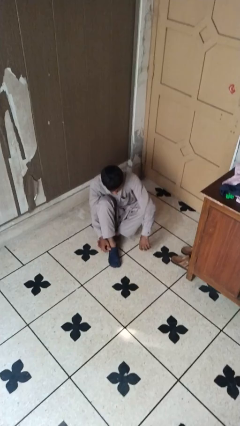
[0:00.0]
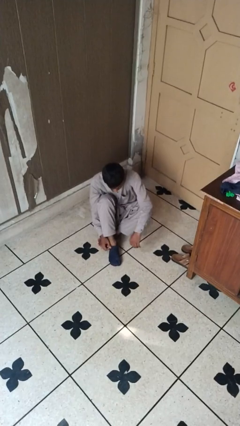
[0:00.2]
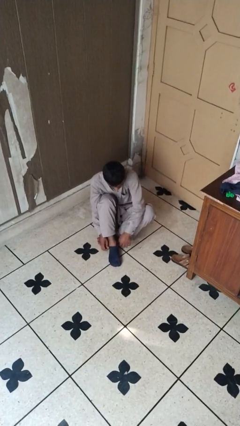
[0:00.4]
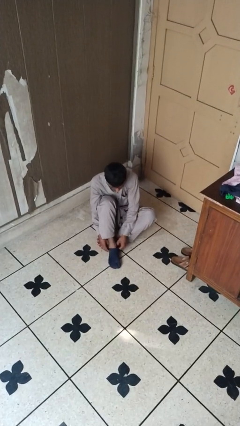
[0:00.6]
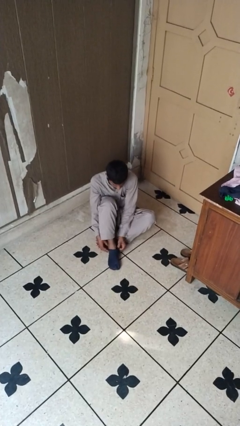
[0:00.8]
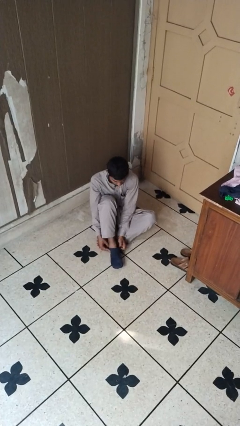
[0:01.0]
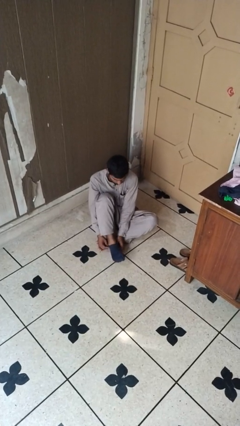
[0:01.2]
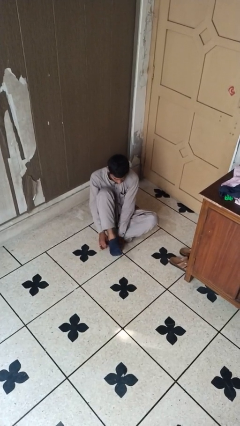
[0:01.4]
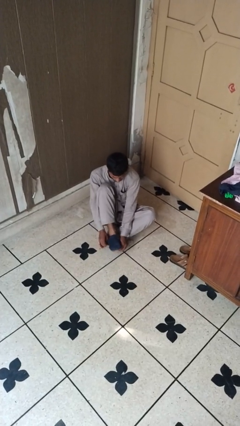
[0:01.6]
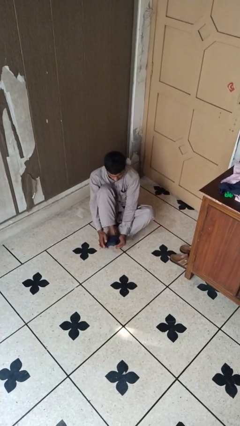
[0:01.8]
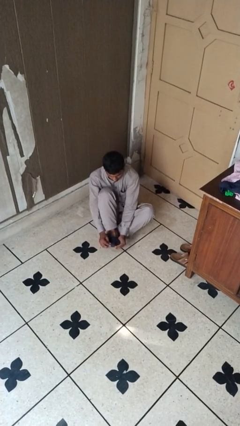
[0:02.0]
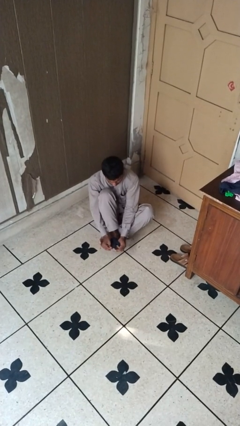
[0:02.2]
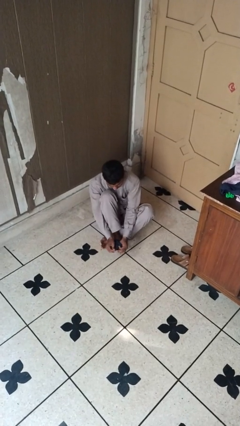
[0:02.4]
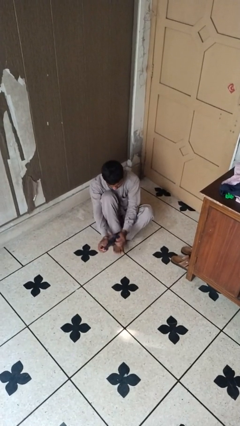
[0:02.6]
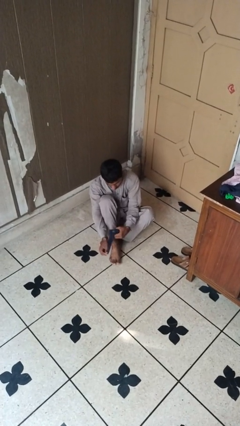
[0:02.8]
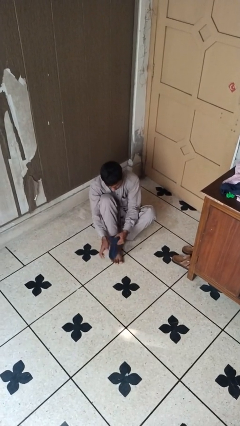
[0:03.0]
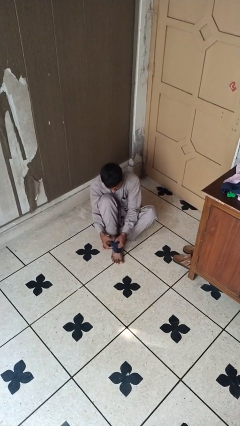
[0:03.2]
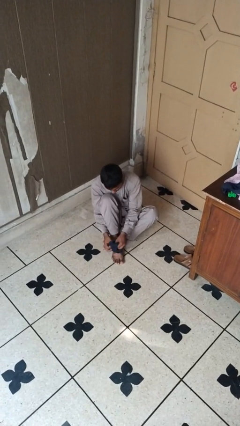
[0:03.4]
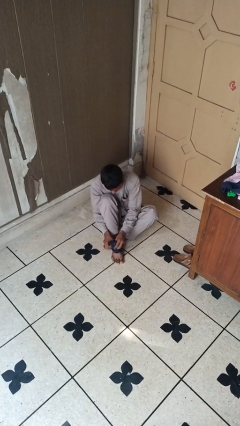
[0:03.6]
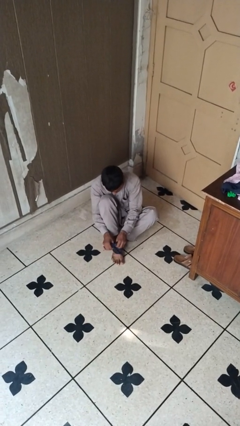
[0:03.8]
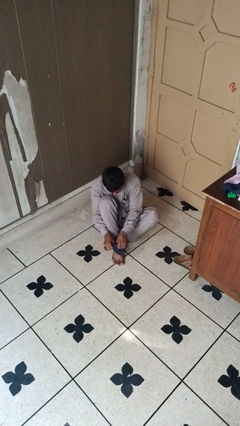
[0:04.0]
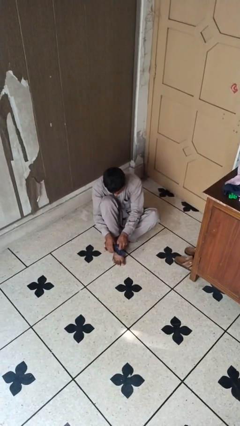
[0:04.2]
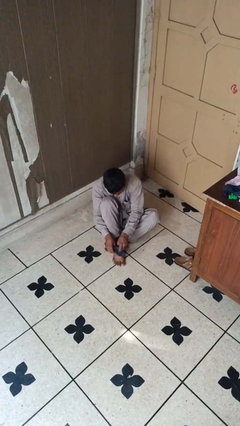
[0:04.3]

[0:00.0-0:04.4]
person takes off socks

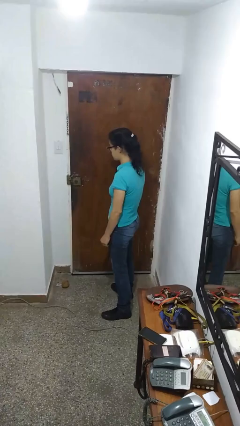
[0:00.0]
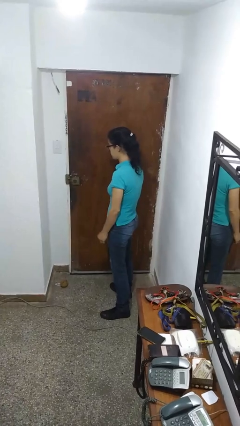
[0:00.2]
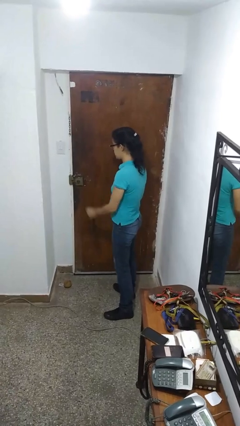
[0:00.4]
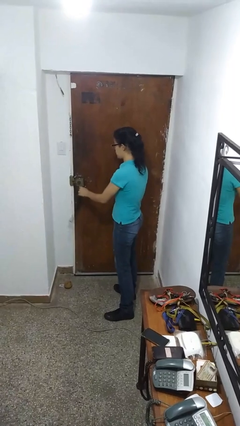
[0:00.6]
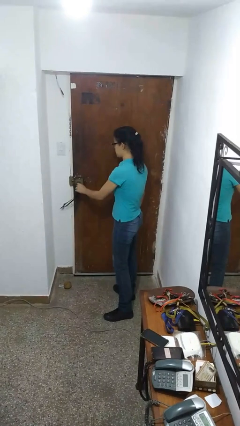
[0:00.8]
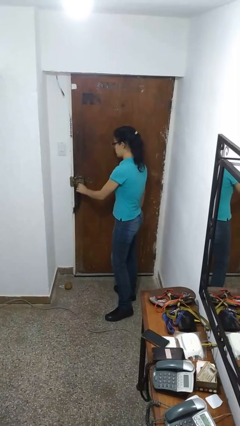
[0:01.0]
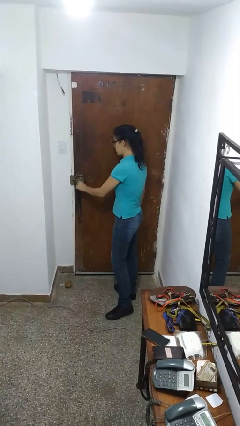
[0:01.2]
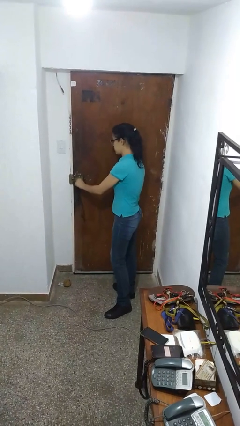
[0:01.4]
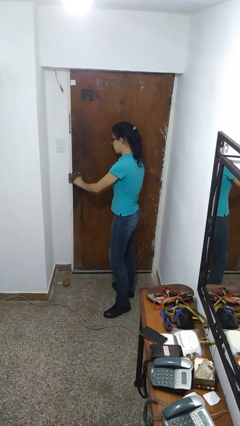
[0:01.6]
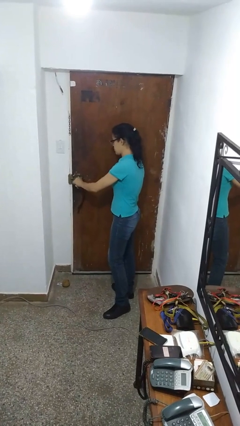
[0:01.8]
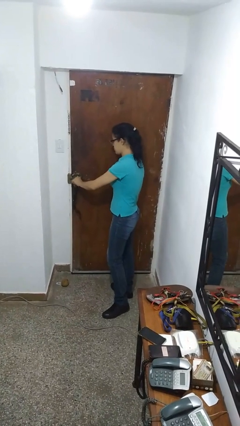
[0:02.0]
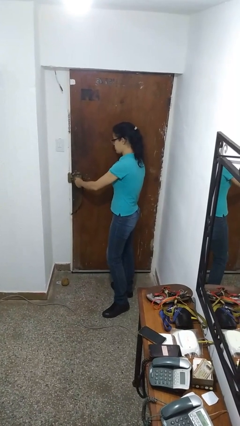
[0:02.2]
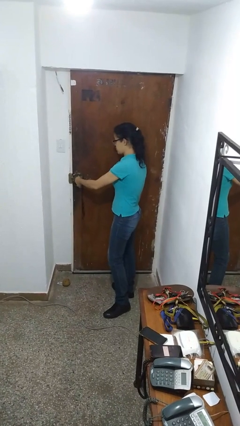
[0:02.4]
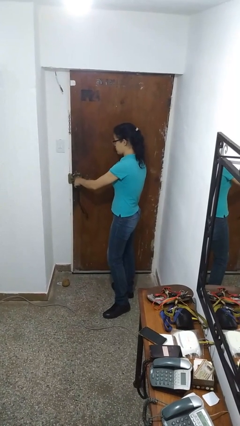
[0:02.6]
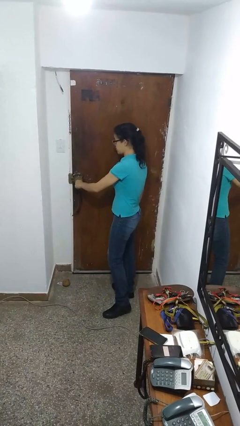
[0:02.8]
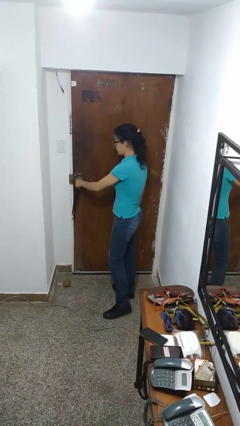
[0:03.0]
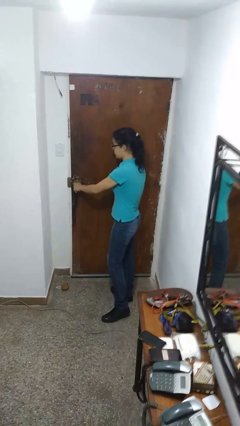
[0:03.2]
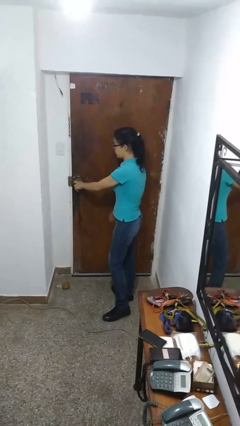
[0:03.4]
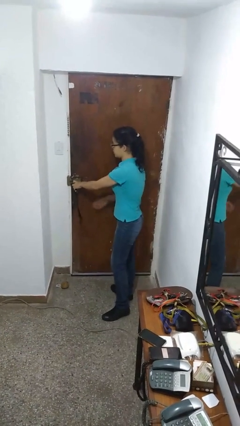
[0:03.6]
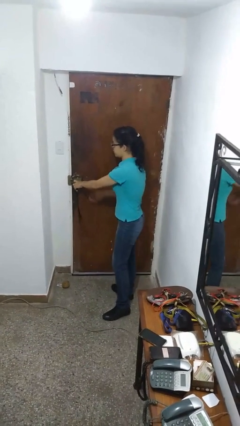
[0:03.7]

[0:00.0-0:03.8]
person unlocks door with keys

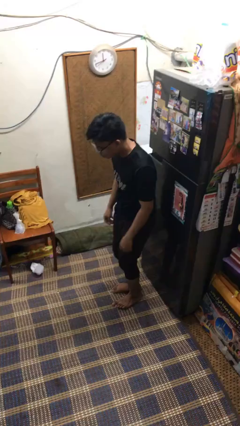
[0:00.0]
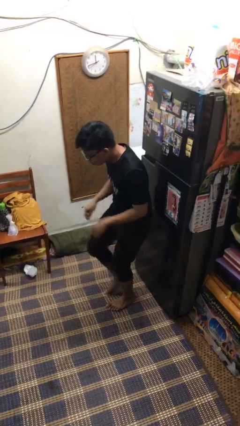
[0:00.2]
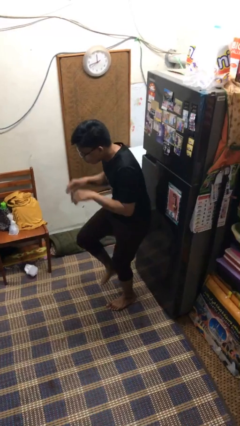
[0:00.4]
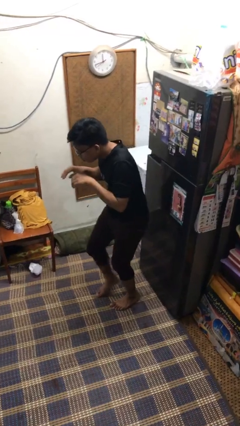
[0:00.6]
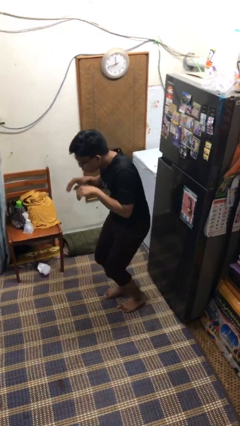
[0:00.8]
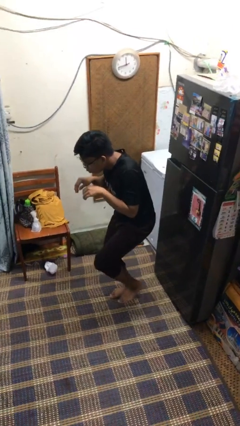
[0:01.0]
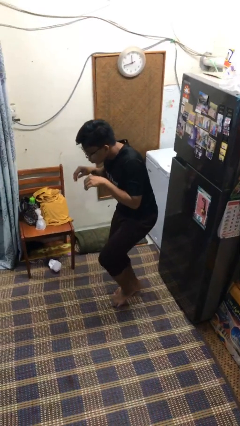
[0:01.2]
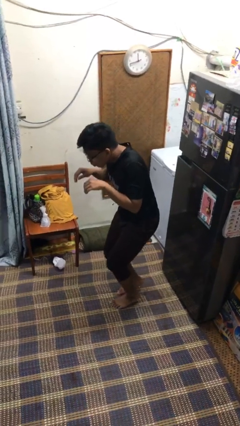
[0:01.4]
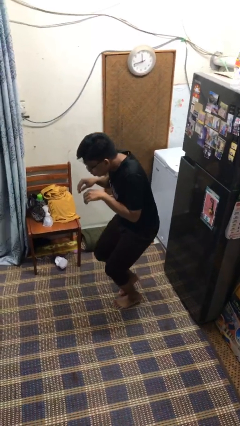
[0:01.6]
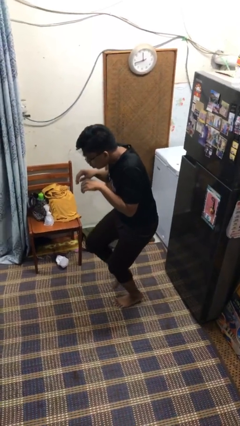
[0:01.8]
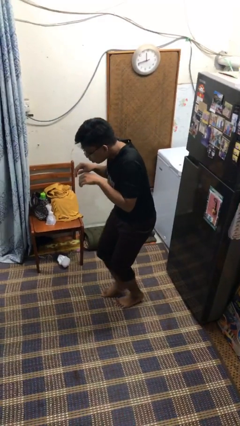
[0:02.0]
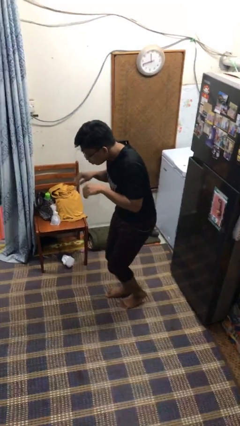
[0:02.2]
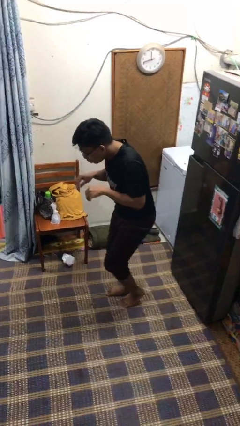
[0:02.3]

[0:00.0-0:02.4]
person walks tiptoe

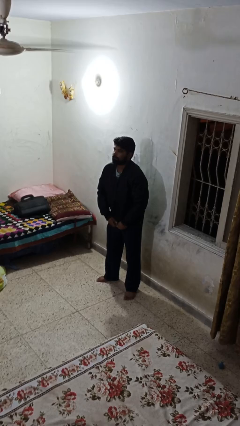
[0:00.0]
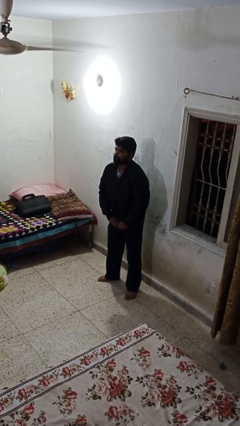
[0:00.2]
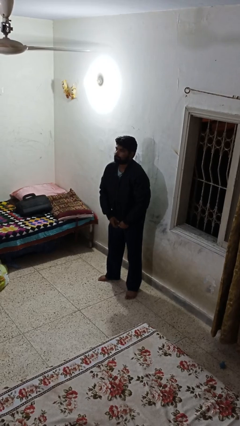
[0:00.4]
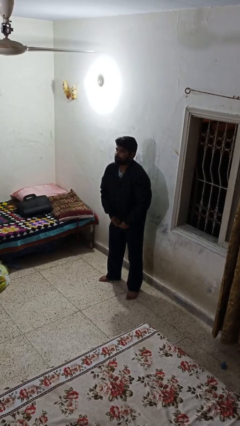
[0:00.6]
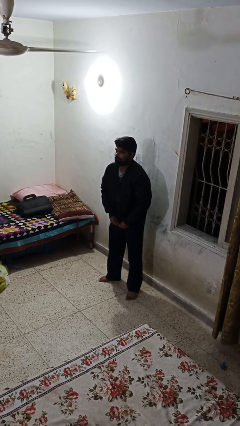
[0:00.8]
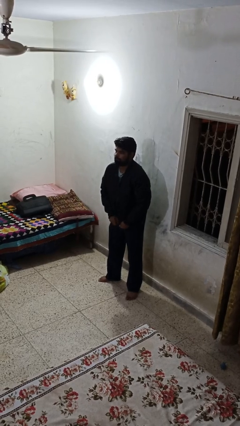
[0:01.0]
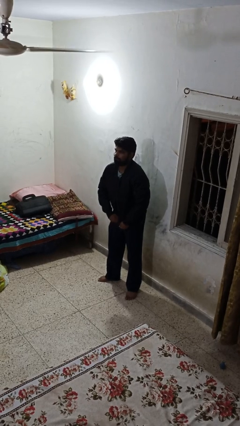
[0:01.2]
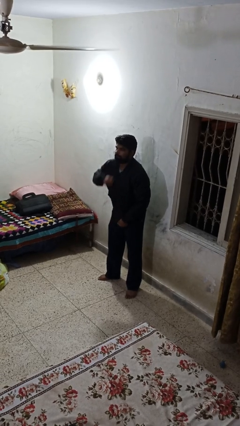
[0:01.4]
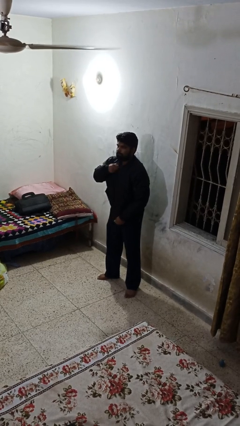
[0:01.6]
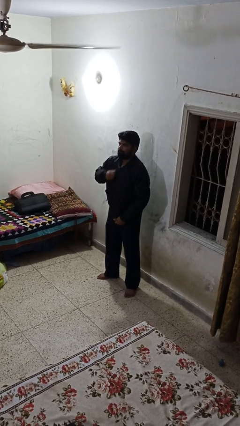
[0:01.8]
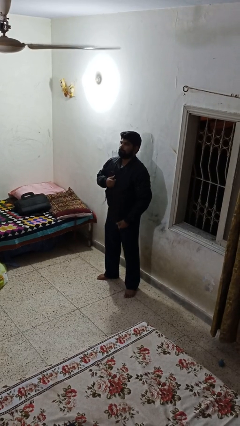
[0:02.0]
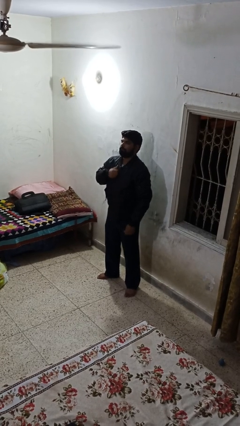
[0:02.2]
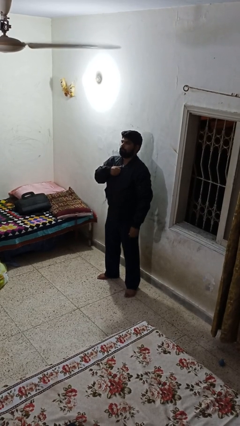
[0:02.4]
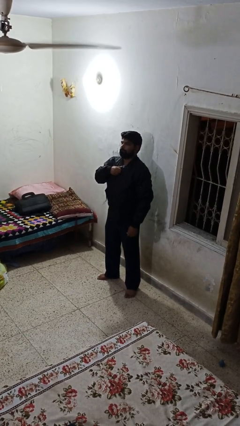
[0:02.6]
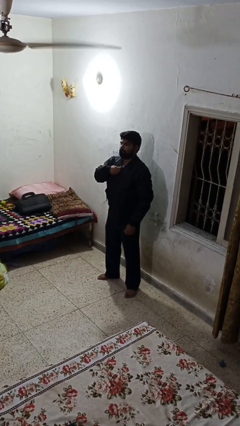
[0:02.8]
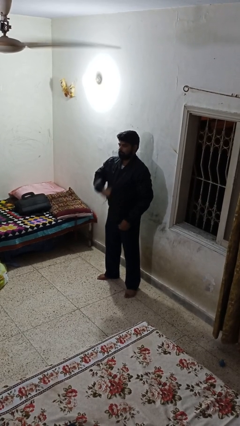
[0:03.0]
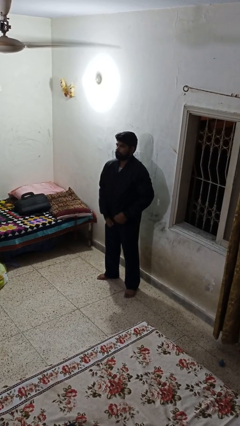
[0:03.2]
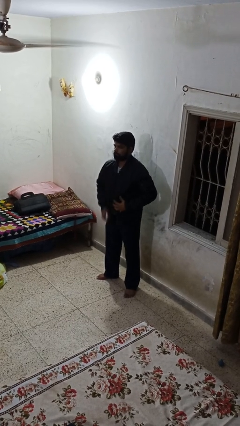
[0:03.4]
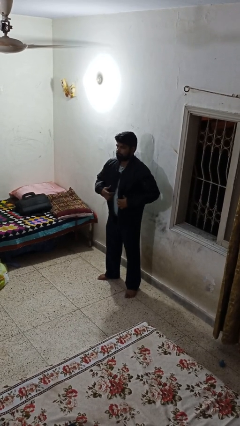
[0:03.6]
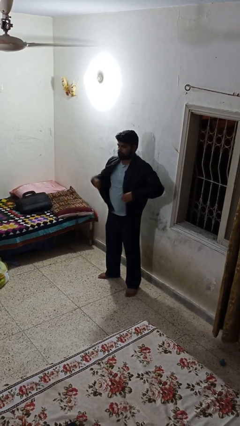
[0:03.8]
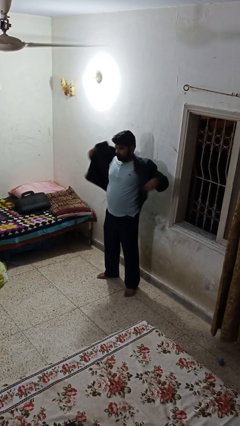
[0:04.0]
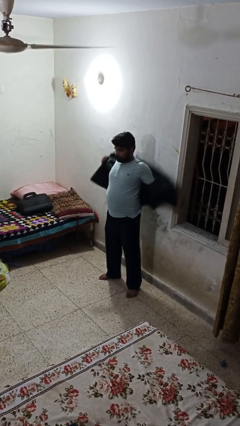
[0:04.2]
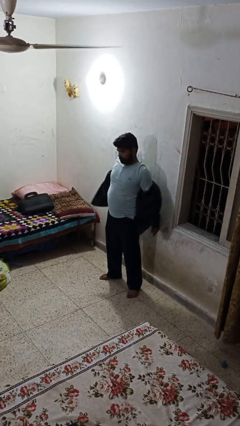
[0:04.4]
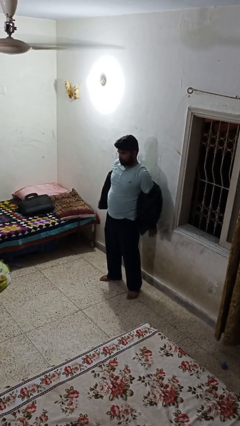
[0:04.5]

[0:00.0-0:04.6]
person unzips jacket

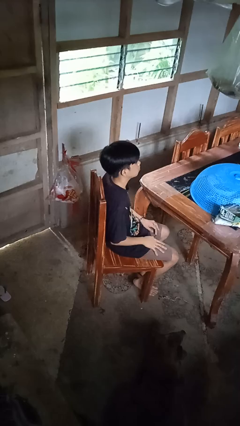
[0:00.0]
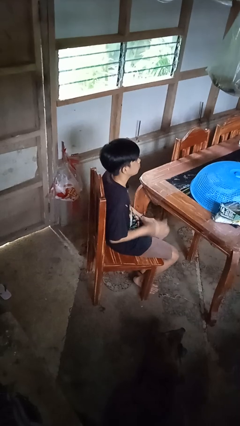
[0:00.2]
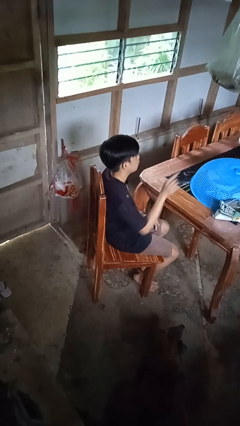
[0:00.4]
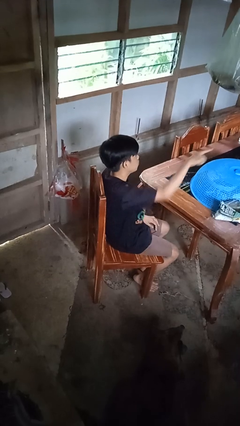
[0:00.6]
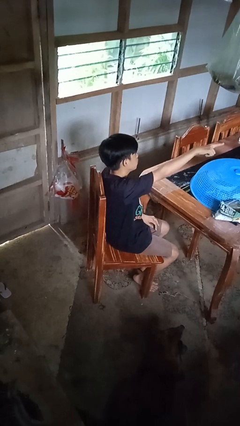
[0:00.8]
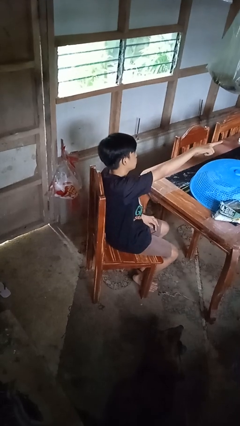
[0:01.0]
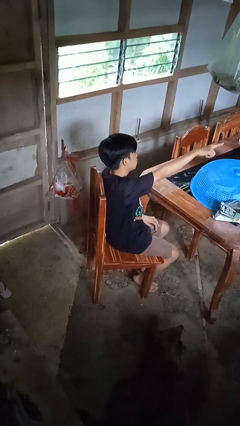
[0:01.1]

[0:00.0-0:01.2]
person points at person

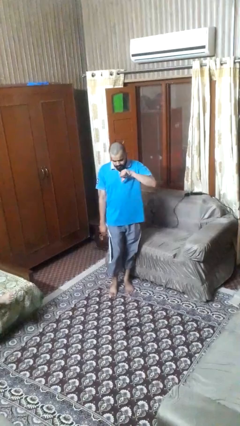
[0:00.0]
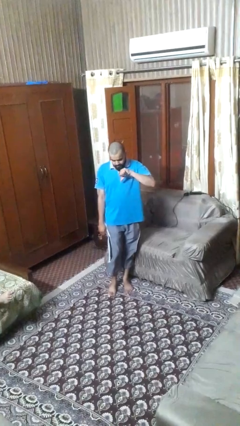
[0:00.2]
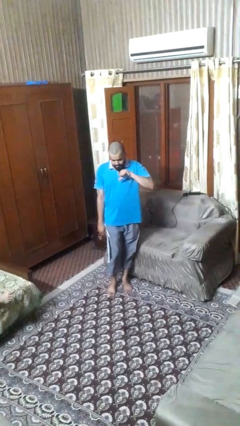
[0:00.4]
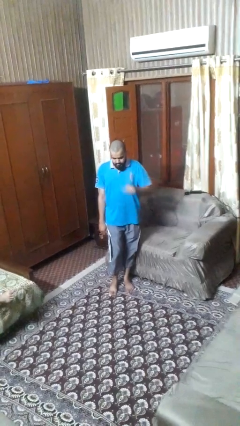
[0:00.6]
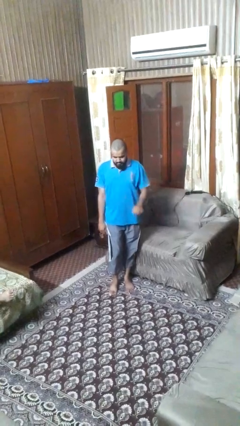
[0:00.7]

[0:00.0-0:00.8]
person gestures thumbs down
